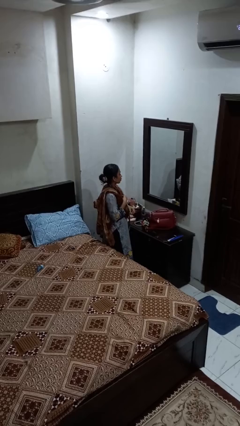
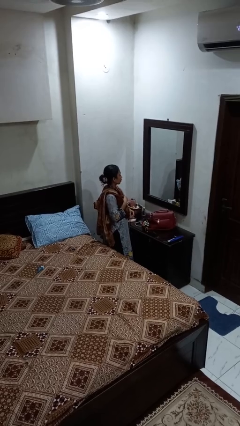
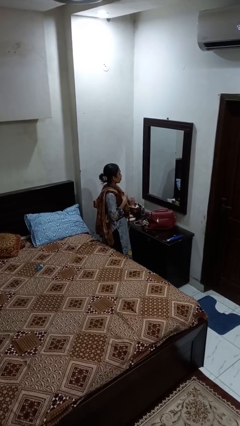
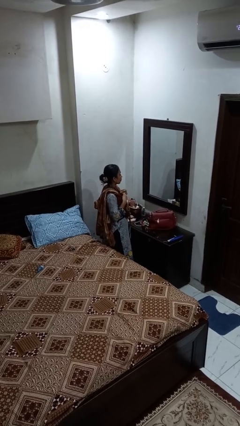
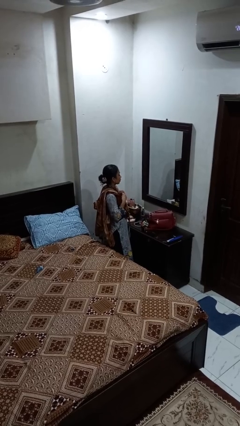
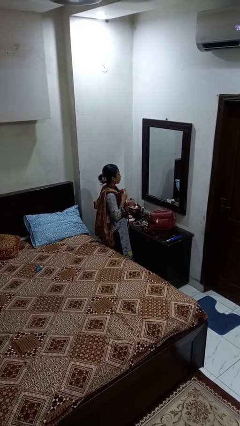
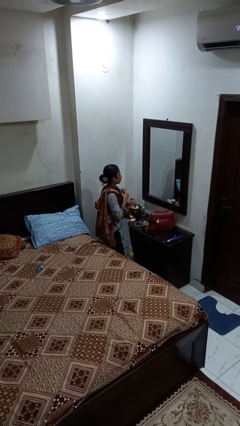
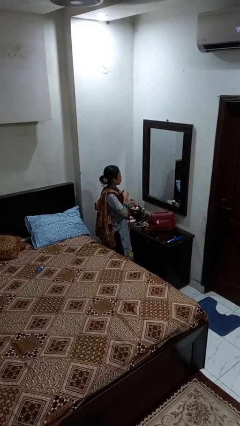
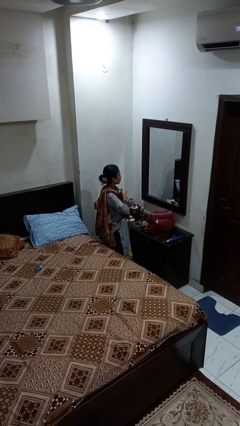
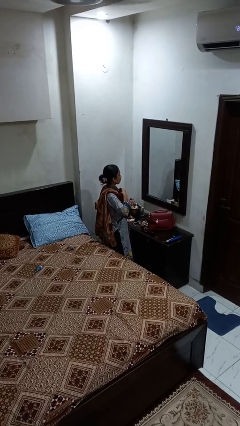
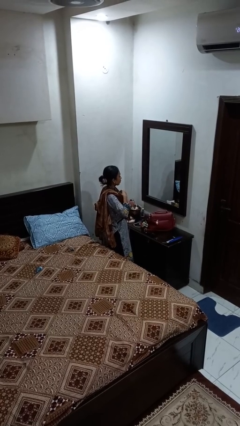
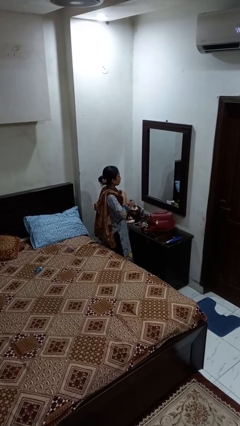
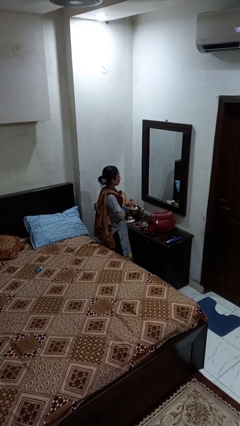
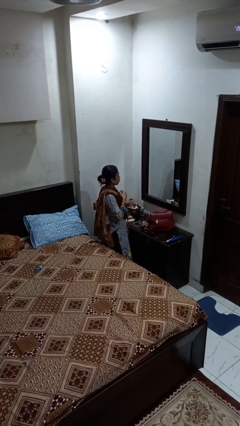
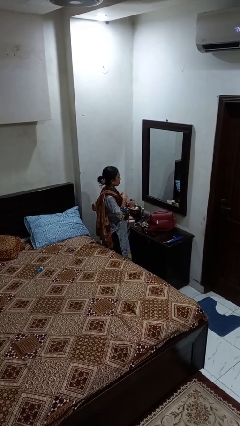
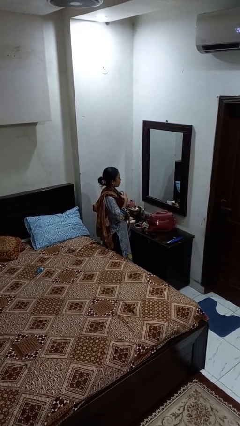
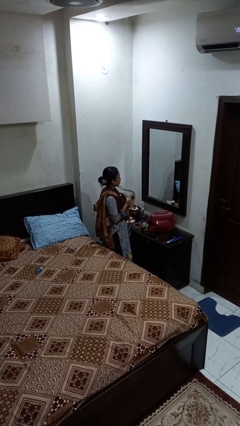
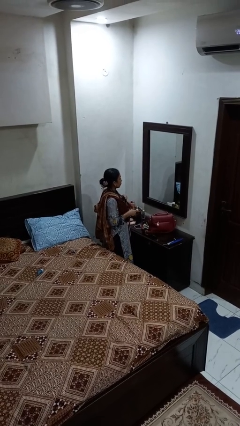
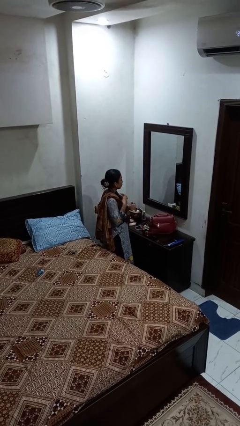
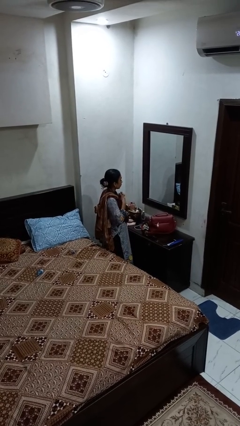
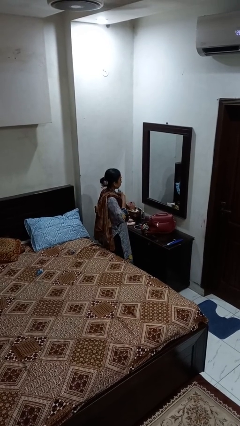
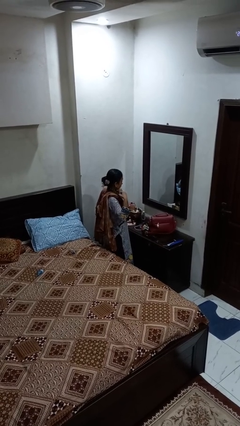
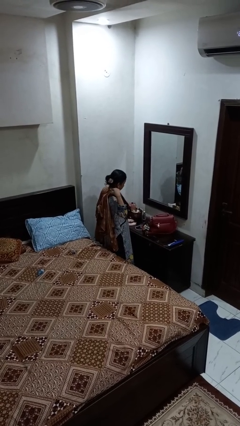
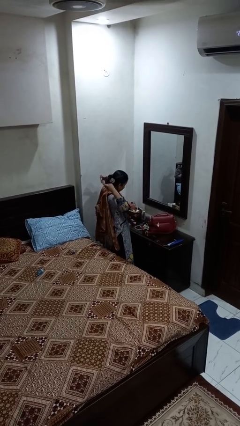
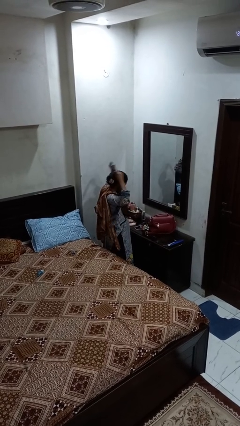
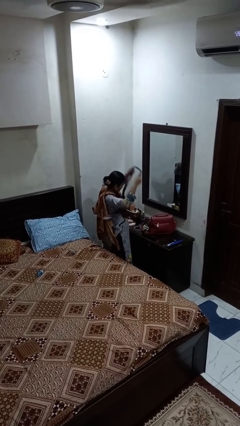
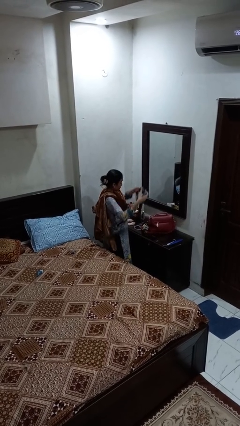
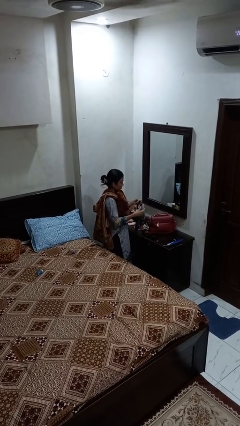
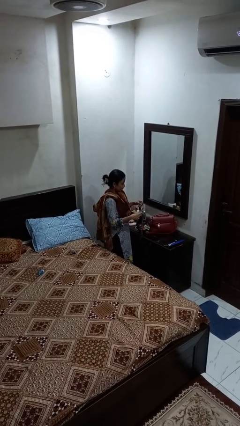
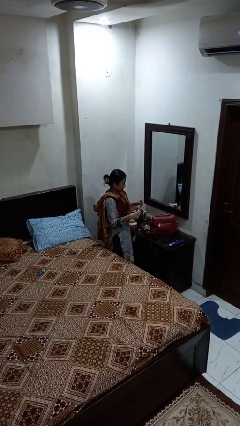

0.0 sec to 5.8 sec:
person takes off necktie

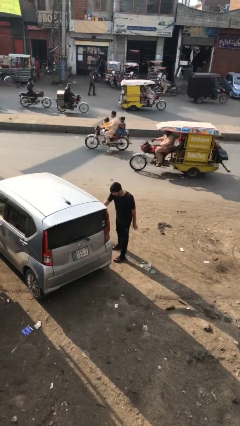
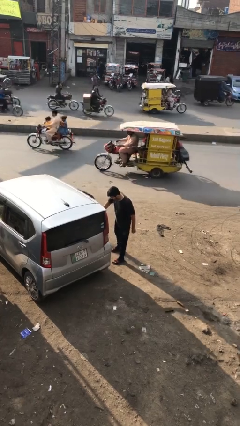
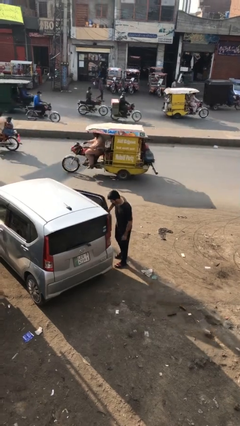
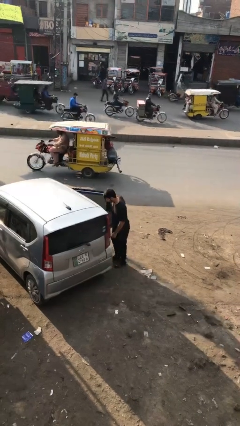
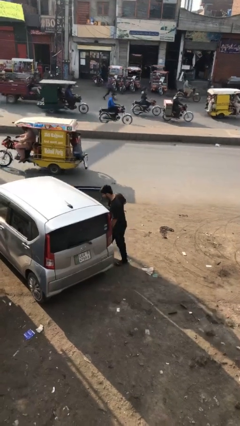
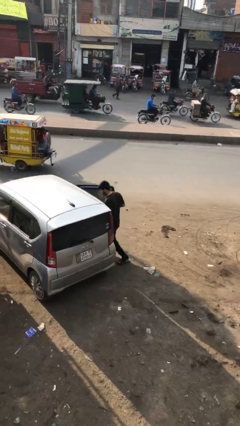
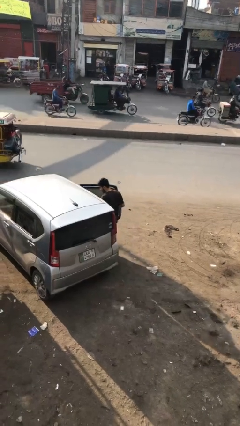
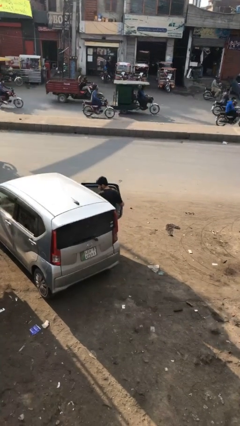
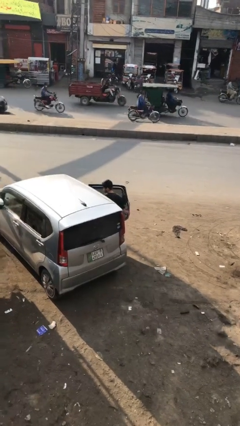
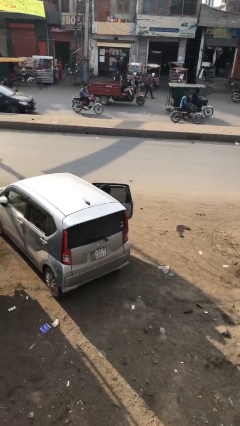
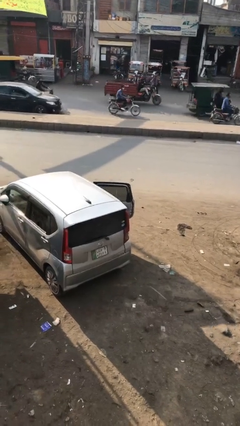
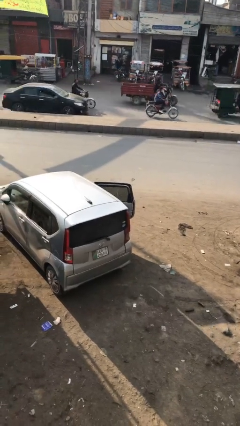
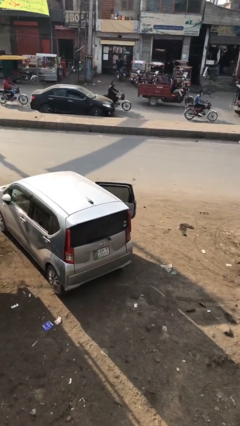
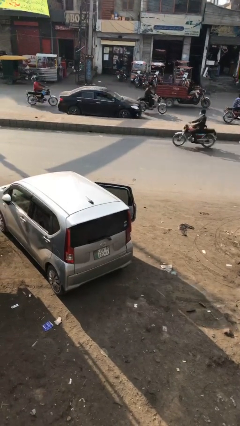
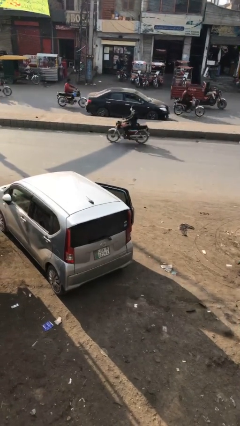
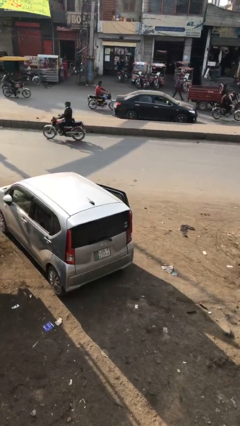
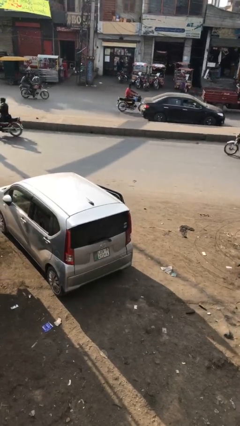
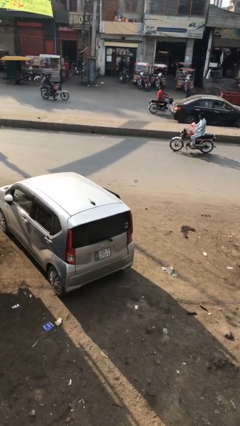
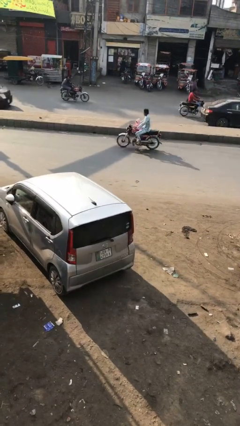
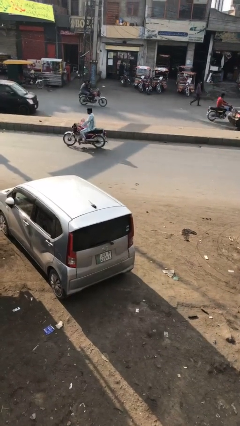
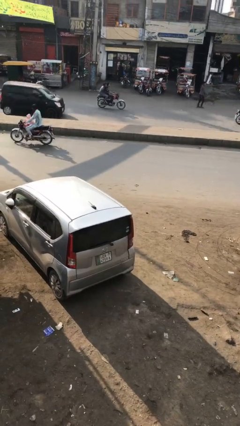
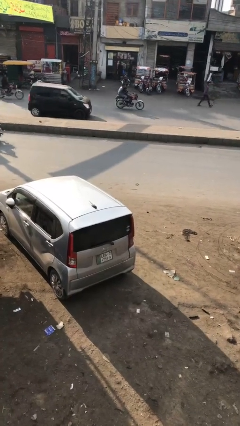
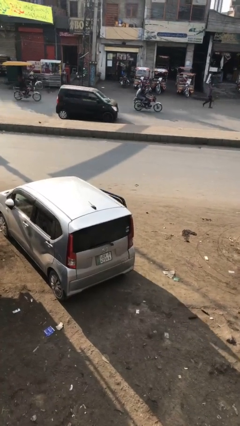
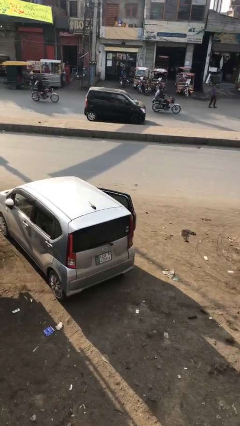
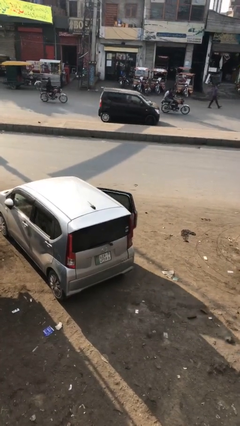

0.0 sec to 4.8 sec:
car picks up person

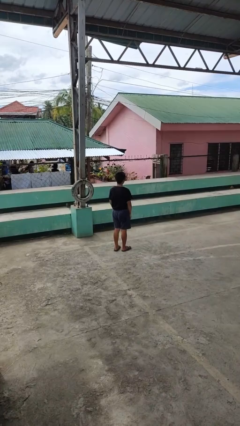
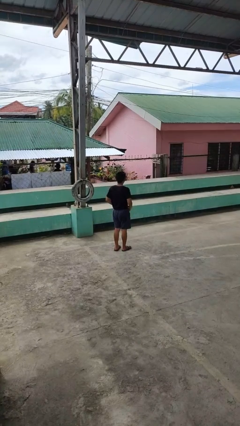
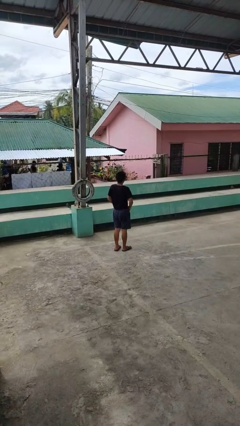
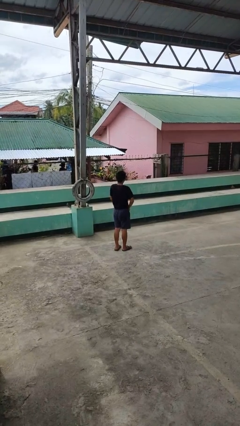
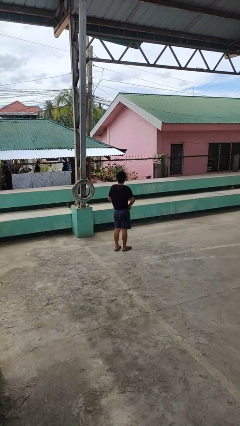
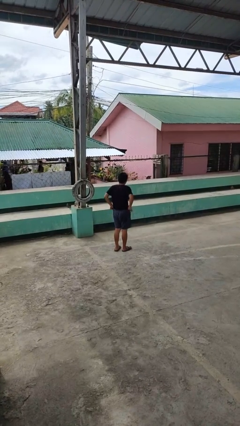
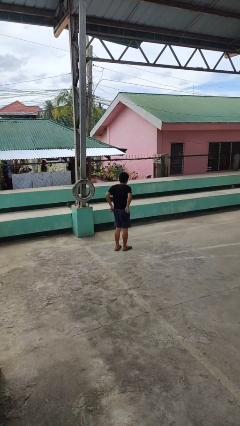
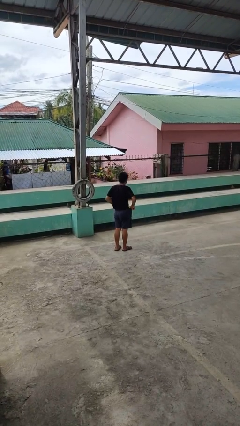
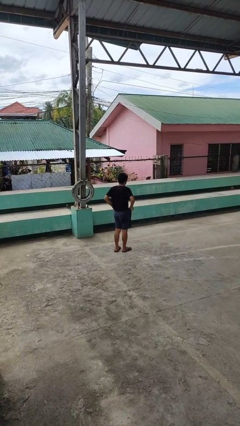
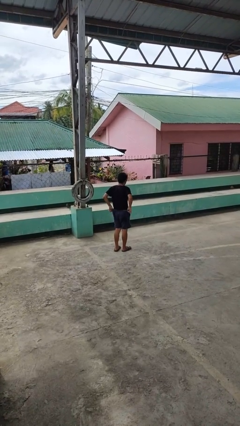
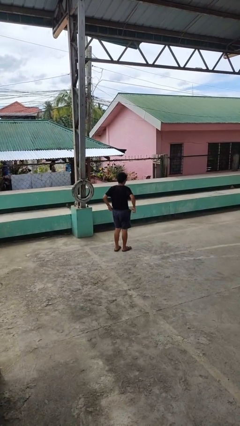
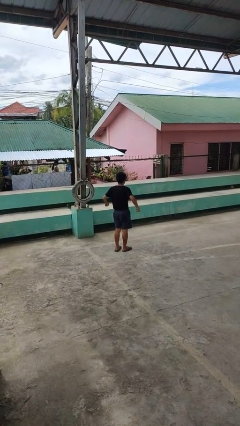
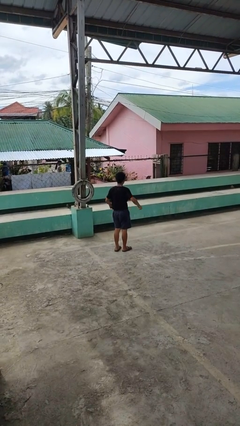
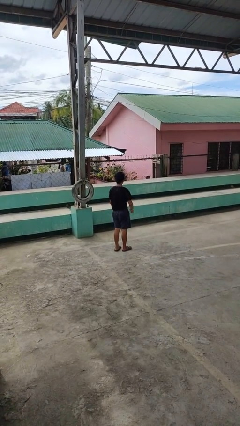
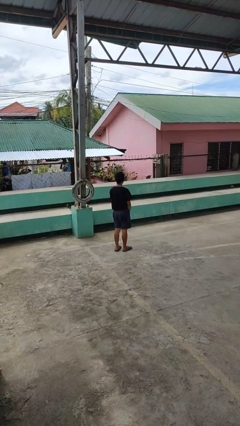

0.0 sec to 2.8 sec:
person hikes up pants

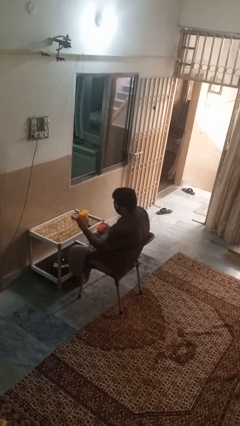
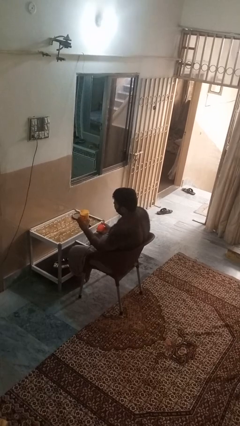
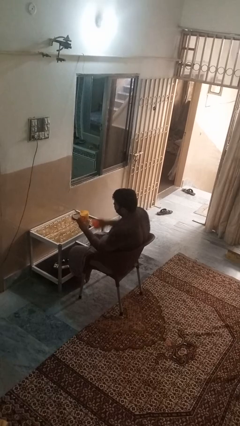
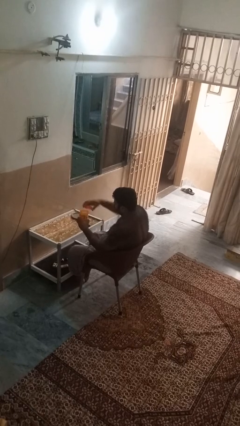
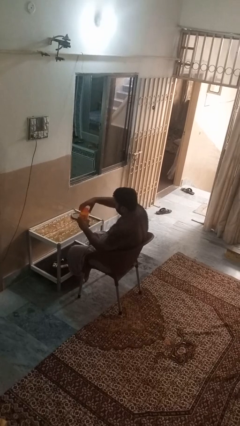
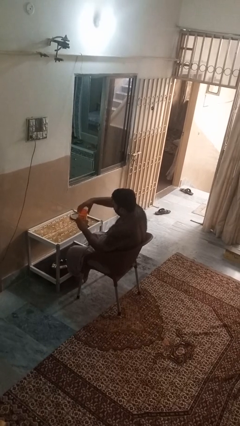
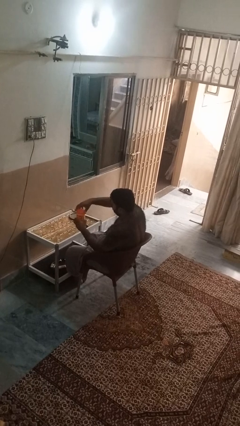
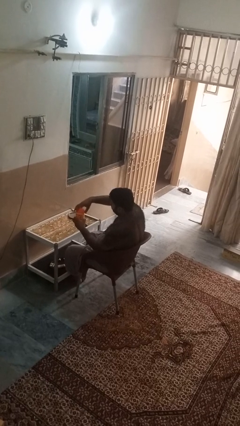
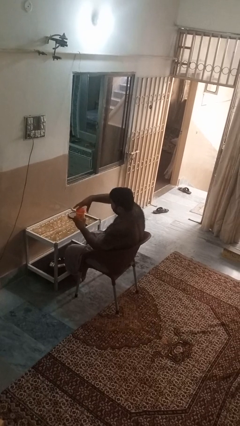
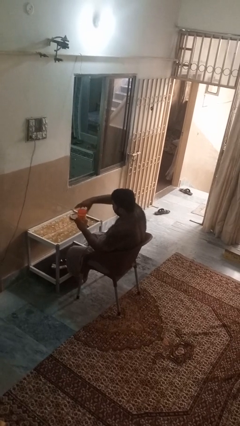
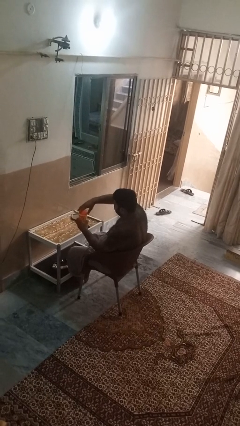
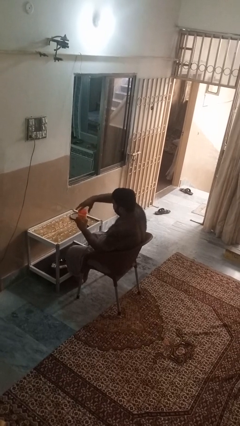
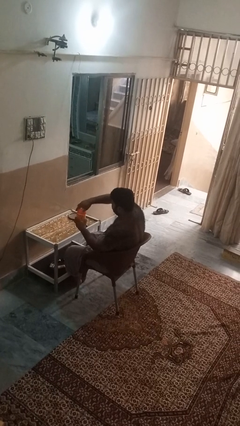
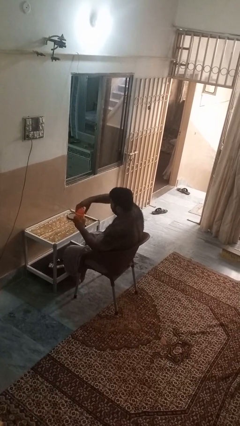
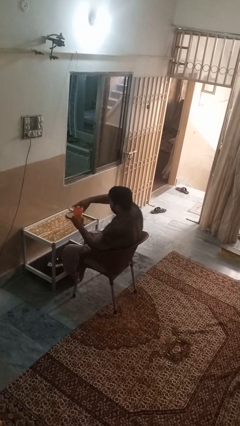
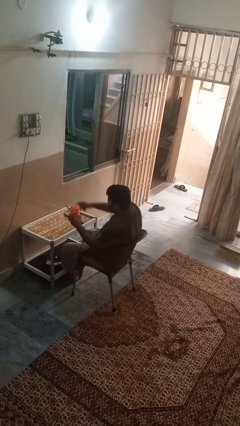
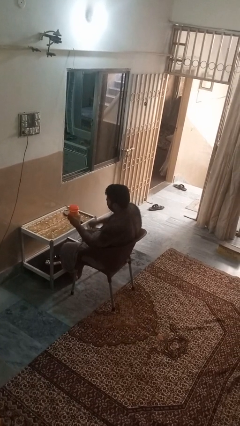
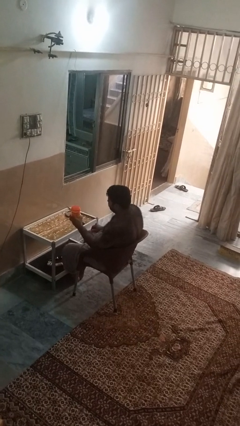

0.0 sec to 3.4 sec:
person closes jar

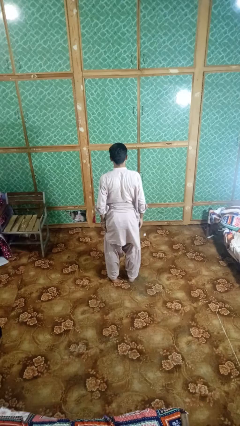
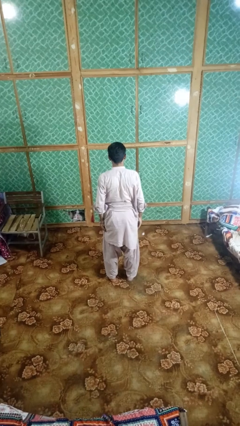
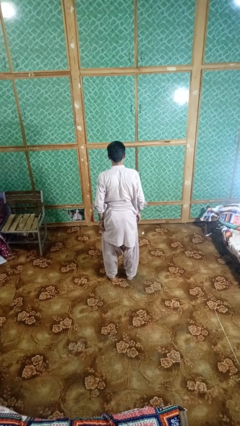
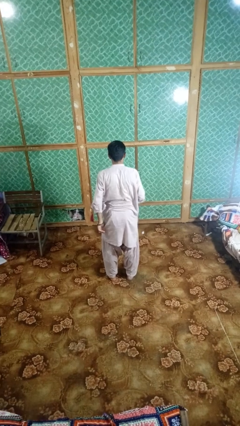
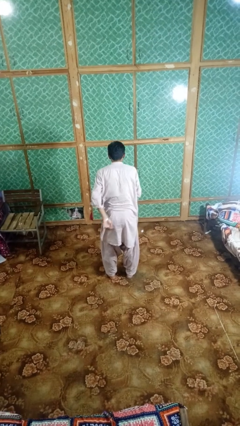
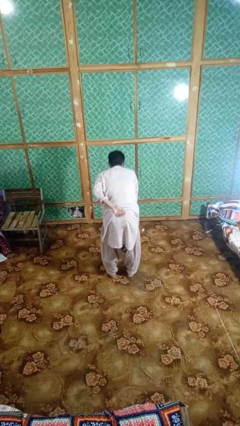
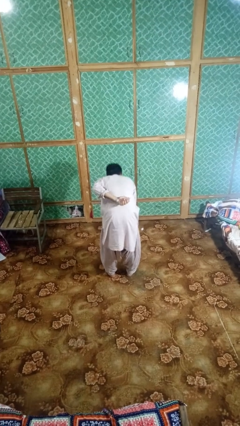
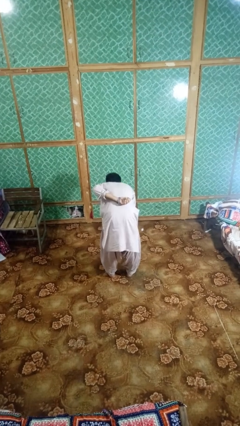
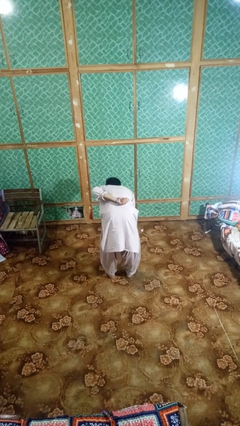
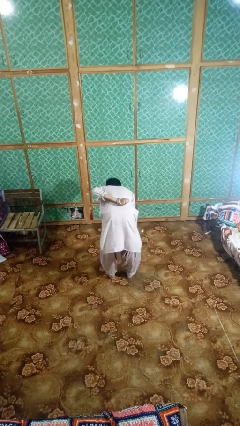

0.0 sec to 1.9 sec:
person bows
